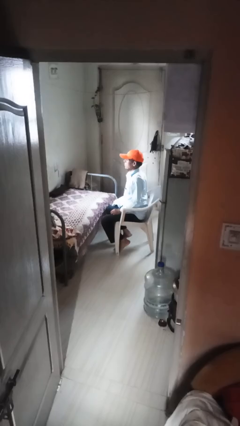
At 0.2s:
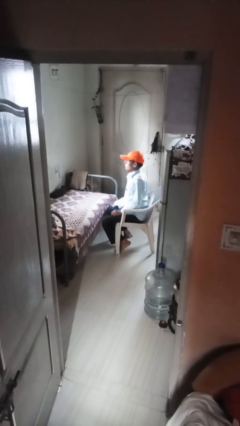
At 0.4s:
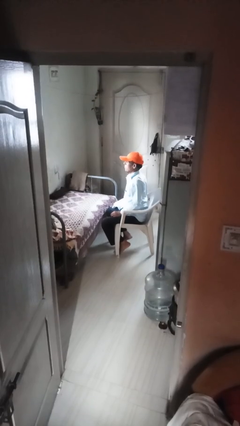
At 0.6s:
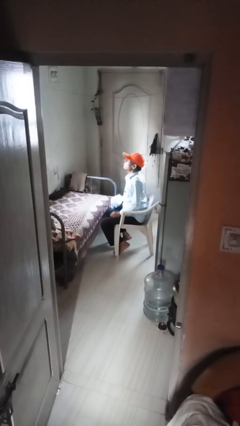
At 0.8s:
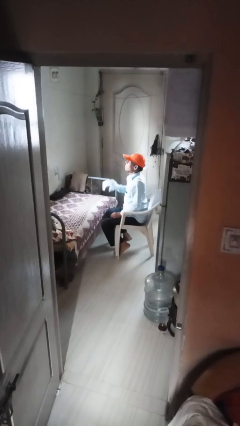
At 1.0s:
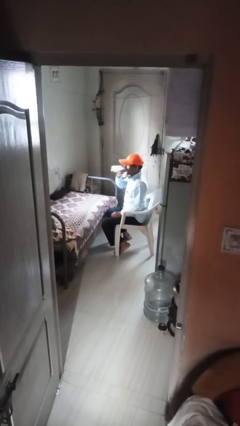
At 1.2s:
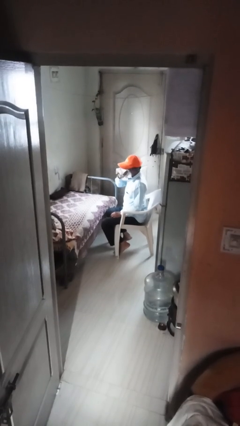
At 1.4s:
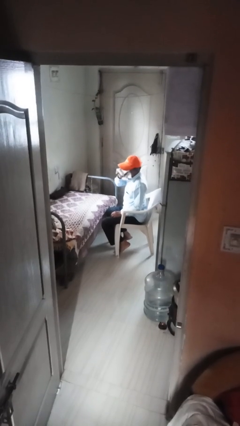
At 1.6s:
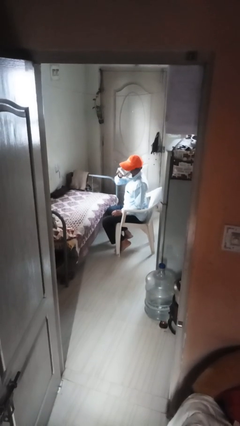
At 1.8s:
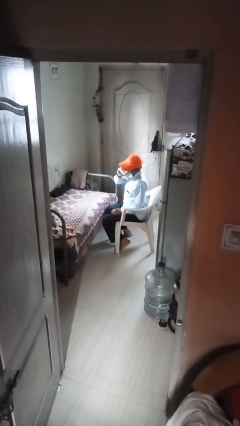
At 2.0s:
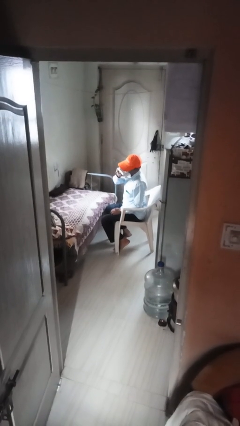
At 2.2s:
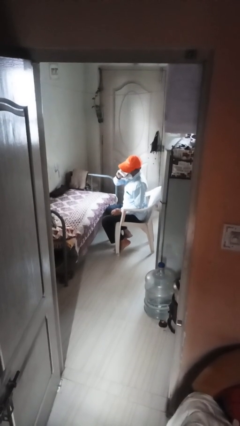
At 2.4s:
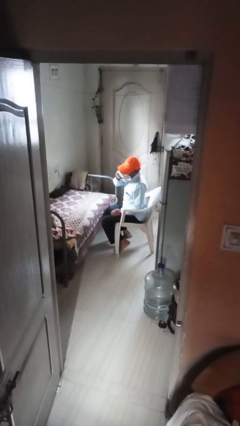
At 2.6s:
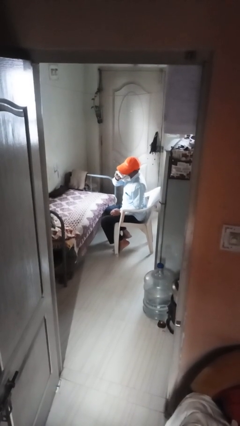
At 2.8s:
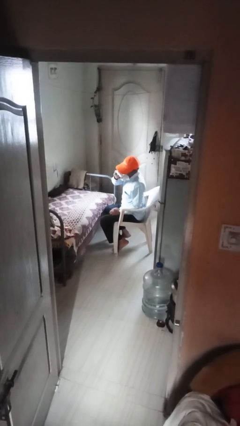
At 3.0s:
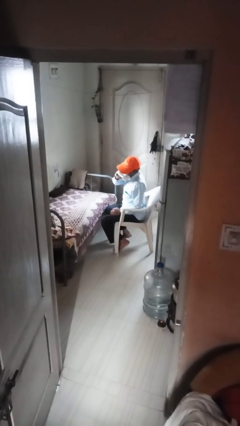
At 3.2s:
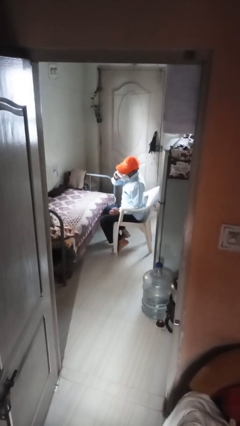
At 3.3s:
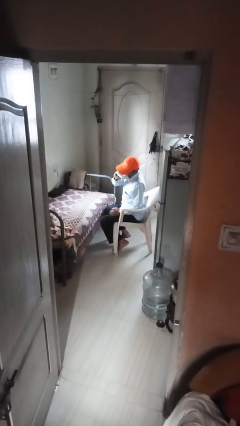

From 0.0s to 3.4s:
person blows nose

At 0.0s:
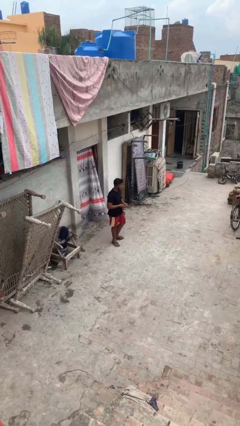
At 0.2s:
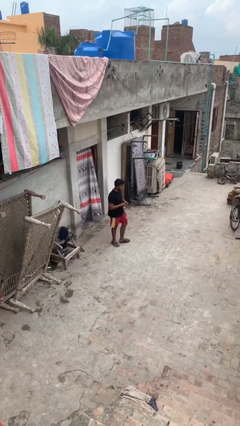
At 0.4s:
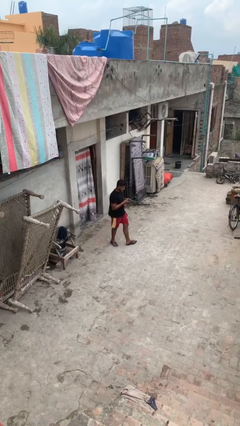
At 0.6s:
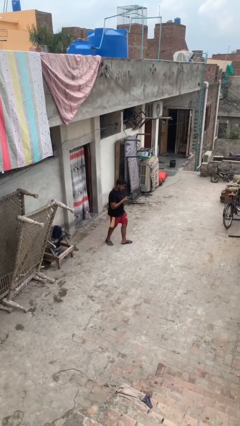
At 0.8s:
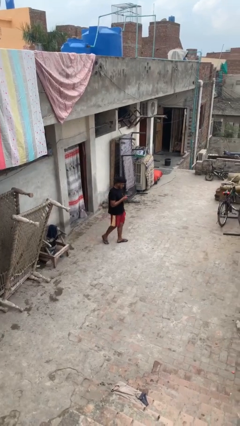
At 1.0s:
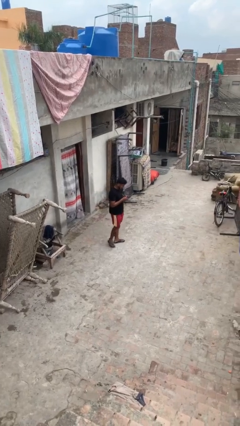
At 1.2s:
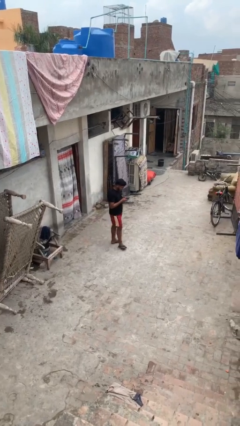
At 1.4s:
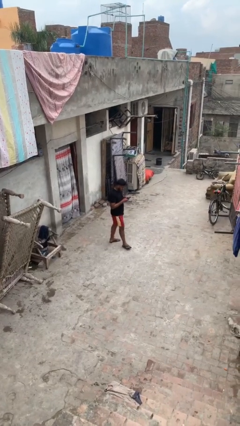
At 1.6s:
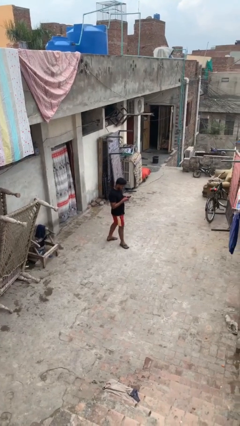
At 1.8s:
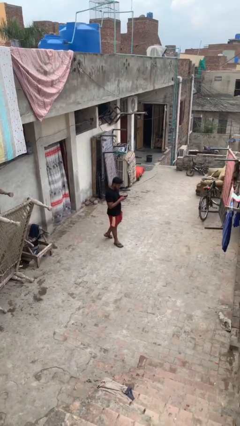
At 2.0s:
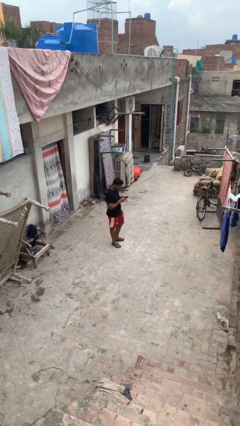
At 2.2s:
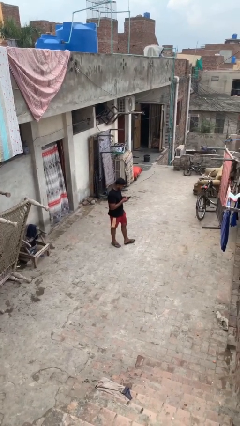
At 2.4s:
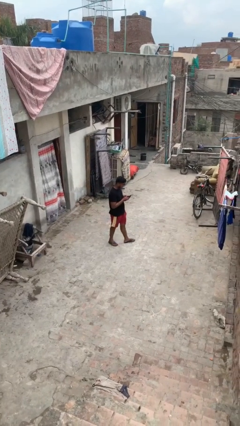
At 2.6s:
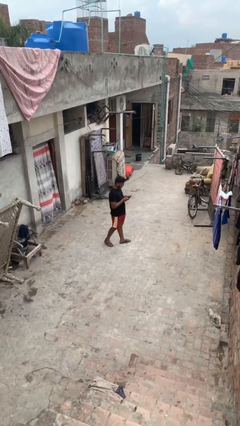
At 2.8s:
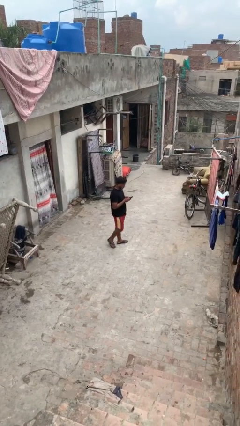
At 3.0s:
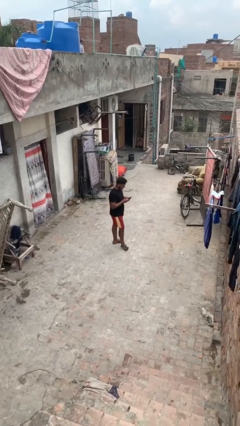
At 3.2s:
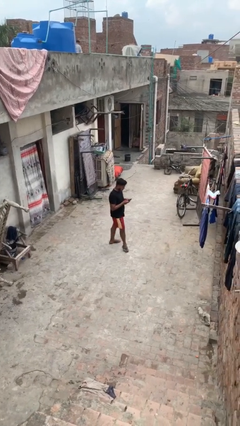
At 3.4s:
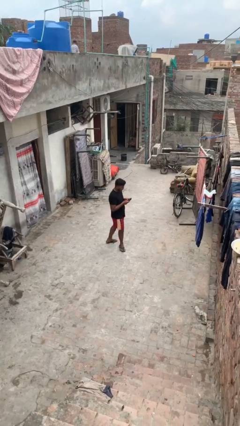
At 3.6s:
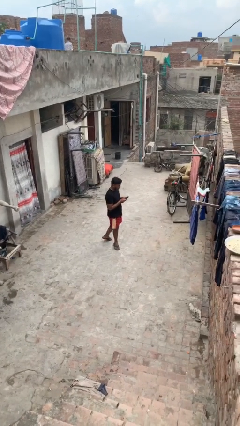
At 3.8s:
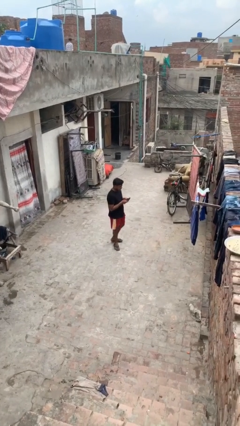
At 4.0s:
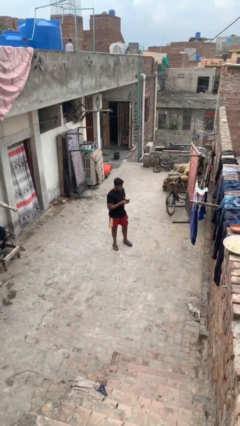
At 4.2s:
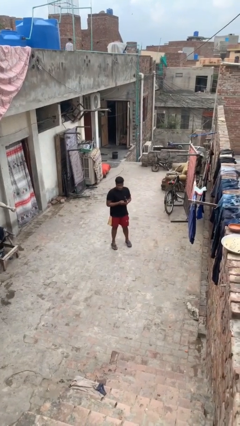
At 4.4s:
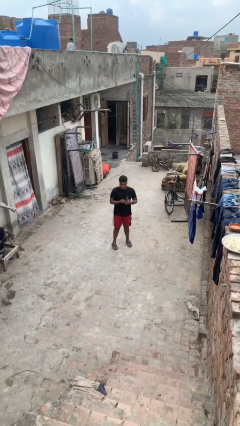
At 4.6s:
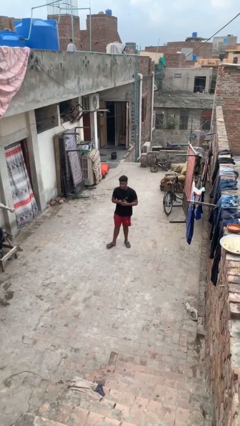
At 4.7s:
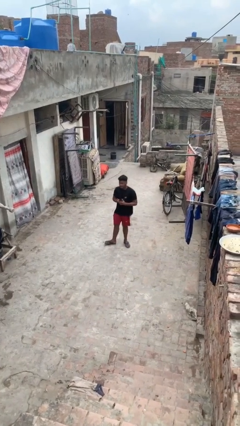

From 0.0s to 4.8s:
person texts on phone

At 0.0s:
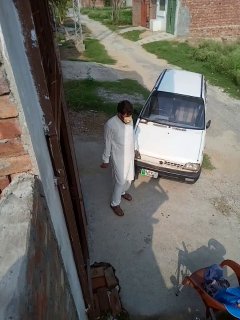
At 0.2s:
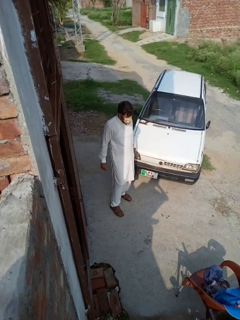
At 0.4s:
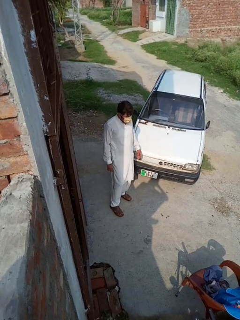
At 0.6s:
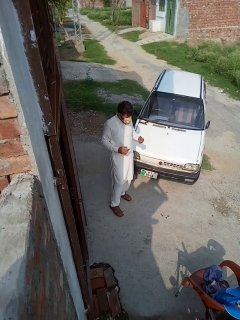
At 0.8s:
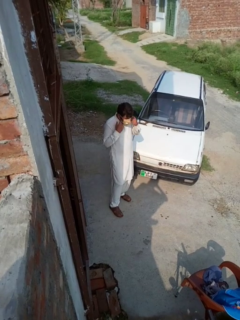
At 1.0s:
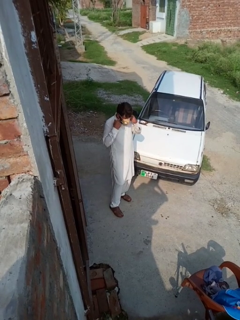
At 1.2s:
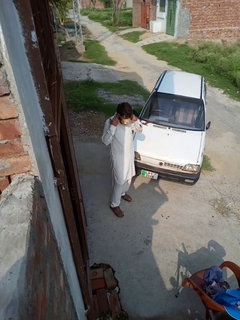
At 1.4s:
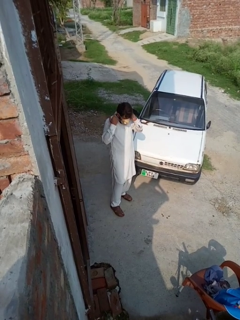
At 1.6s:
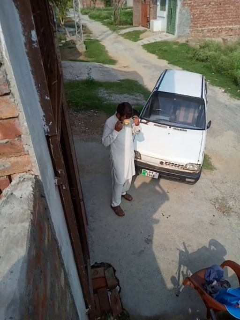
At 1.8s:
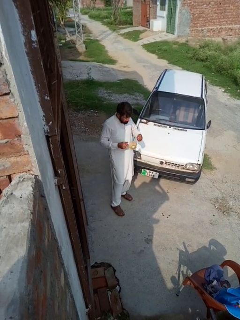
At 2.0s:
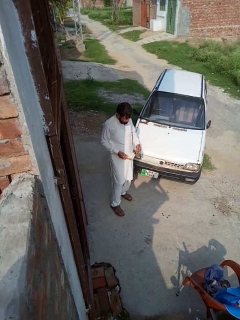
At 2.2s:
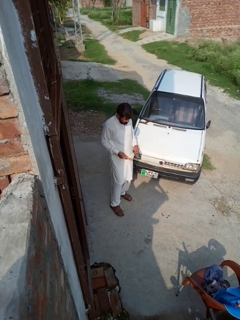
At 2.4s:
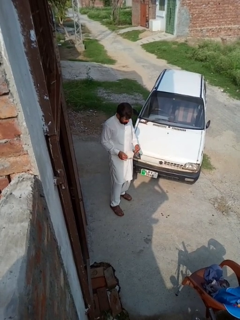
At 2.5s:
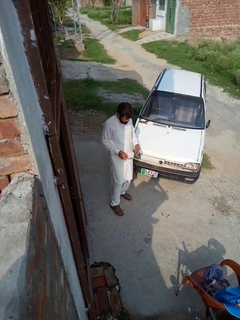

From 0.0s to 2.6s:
person takes off facemask

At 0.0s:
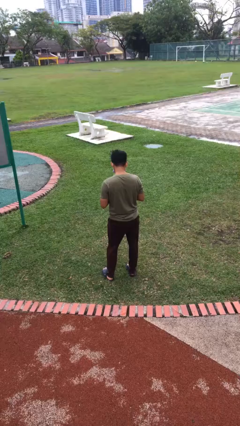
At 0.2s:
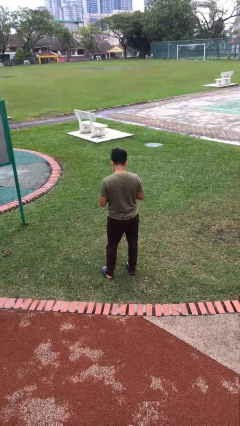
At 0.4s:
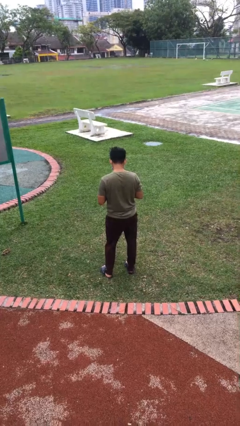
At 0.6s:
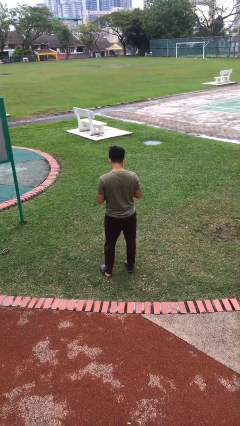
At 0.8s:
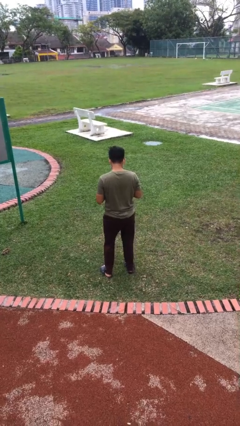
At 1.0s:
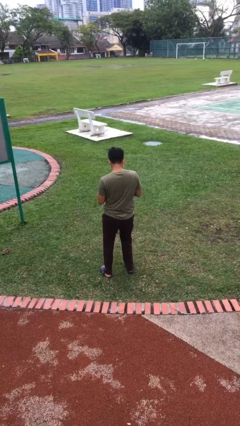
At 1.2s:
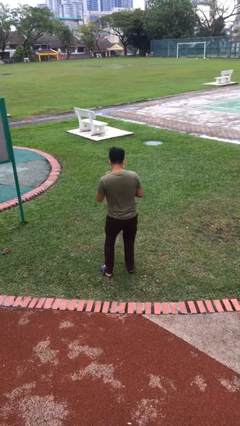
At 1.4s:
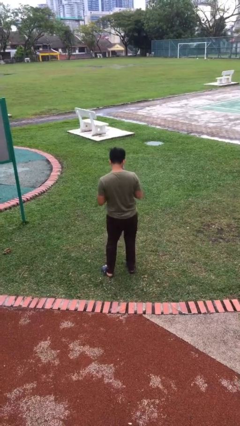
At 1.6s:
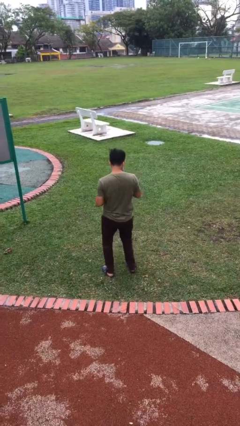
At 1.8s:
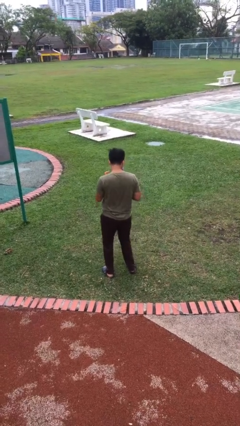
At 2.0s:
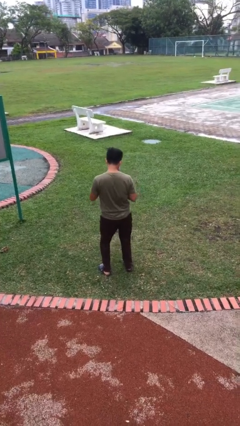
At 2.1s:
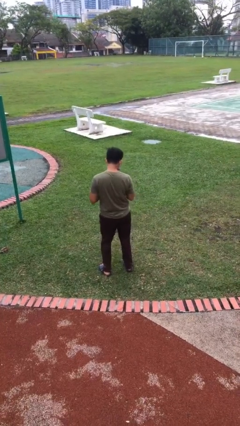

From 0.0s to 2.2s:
person wiggles hips

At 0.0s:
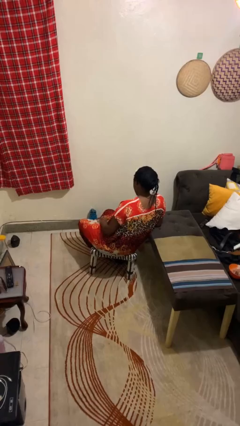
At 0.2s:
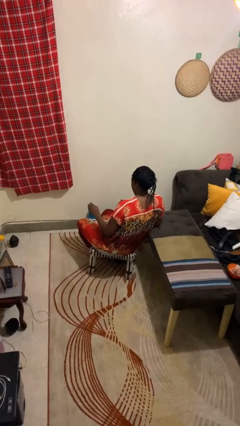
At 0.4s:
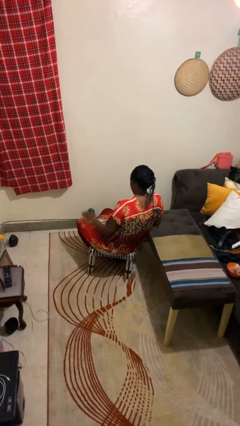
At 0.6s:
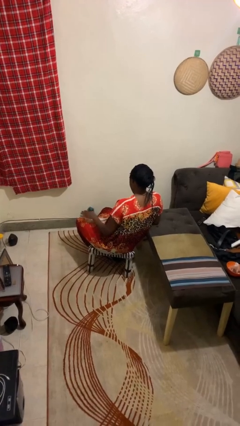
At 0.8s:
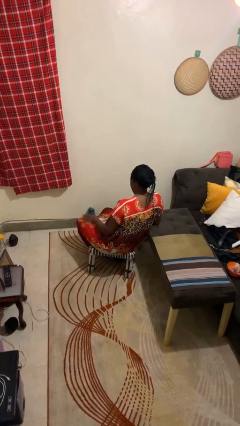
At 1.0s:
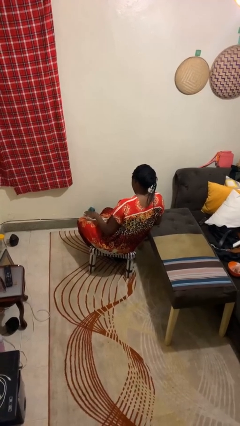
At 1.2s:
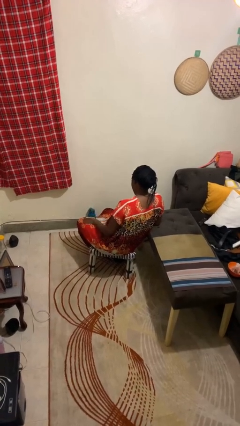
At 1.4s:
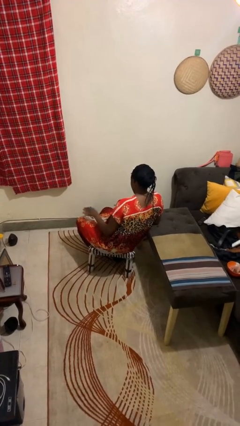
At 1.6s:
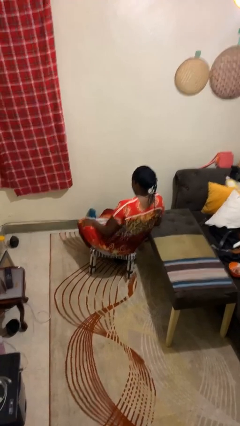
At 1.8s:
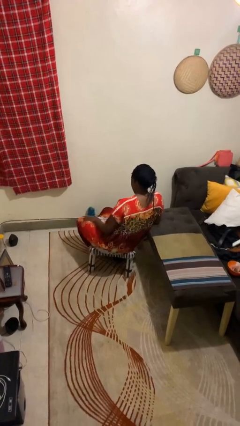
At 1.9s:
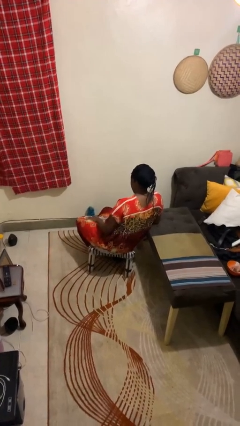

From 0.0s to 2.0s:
person slaps hands on thighs

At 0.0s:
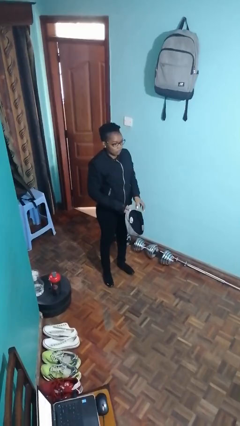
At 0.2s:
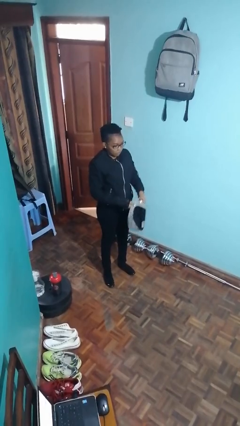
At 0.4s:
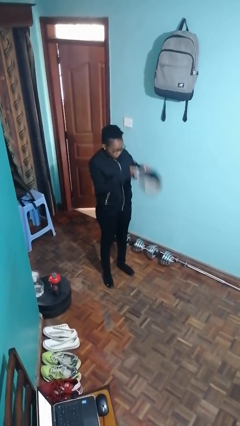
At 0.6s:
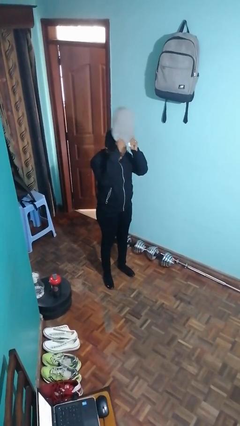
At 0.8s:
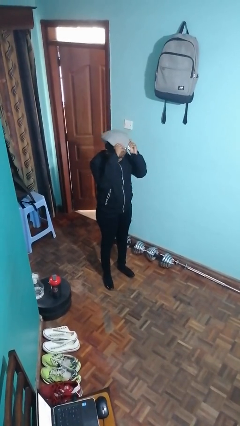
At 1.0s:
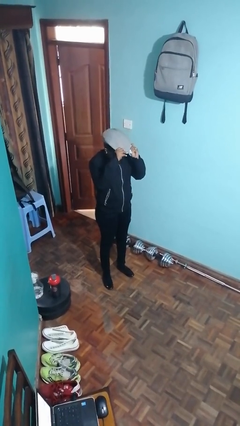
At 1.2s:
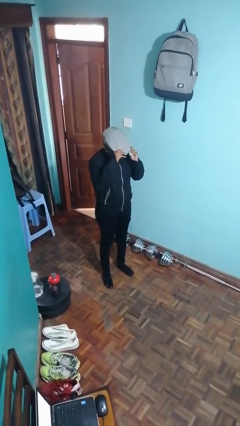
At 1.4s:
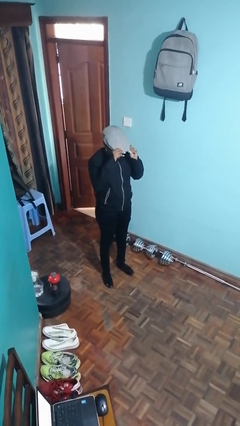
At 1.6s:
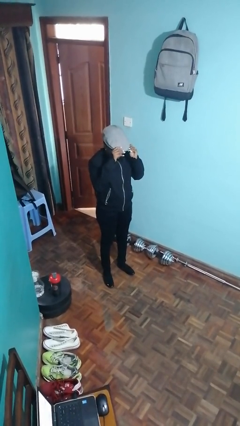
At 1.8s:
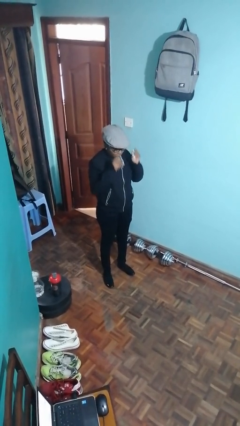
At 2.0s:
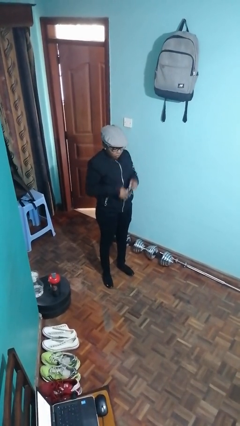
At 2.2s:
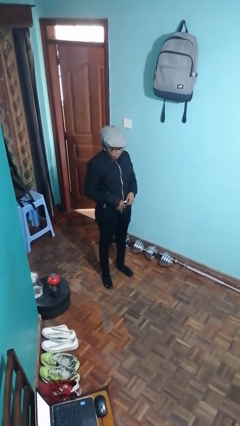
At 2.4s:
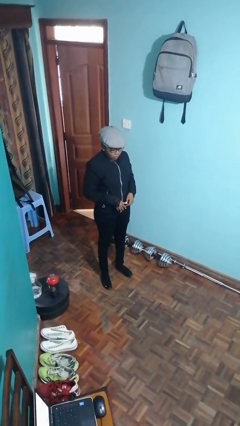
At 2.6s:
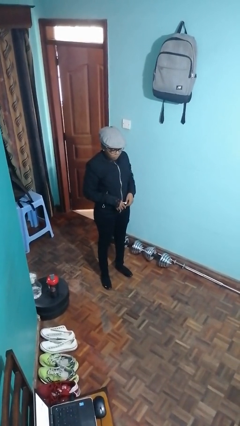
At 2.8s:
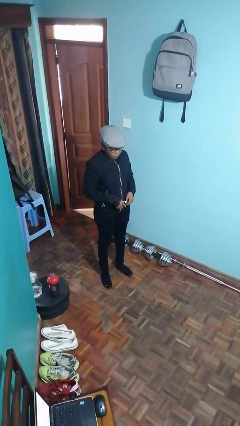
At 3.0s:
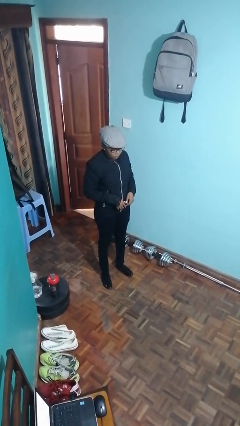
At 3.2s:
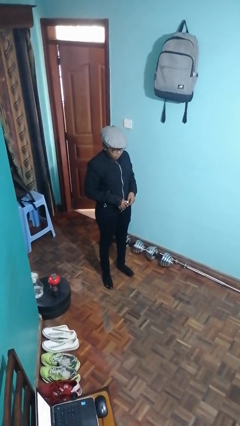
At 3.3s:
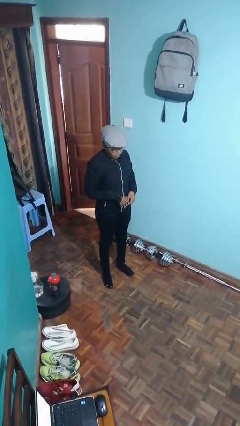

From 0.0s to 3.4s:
person puts on hat
